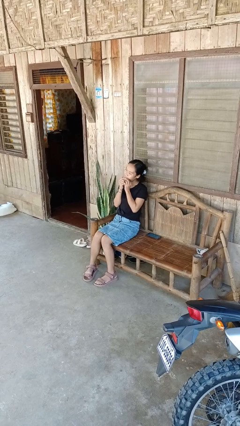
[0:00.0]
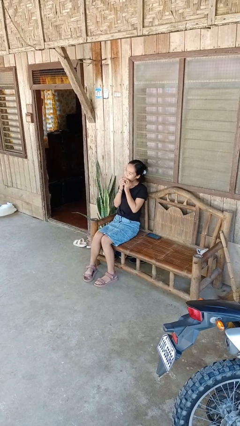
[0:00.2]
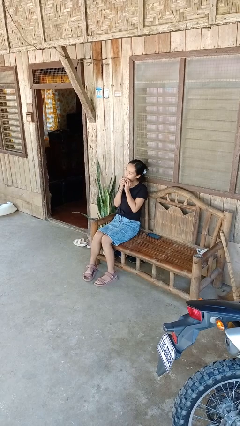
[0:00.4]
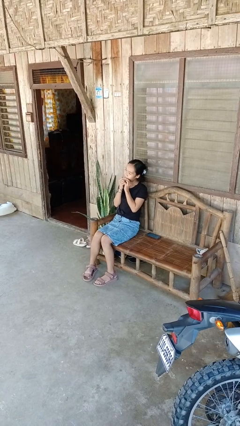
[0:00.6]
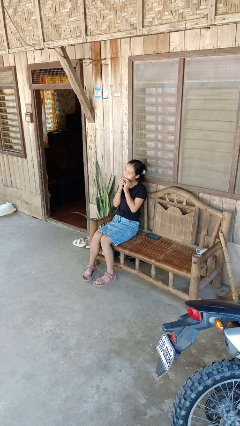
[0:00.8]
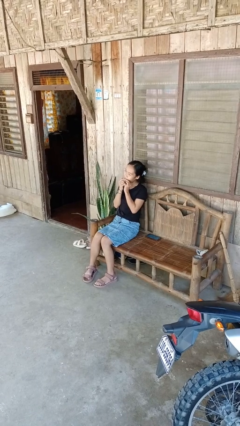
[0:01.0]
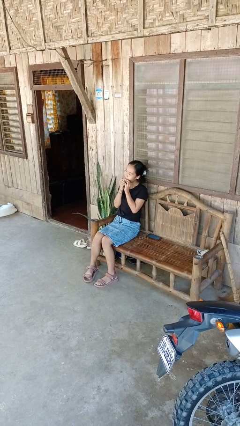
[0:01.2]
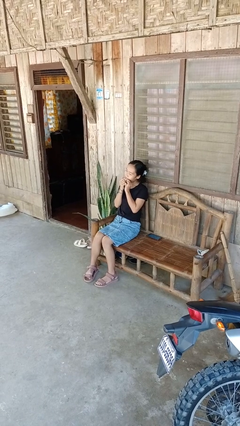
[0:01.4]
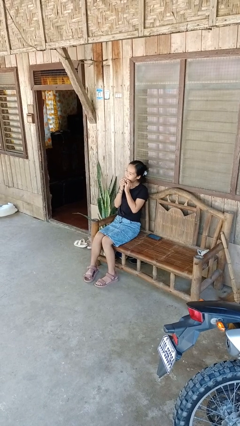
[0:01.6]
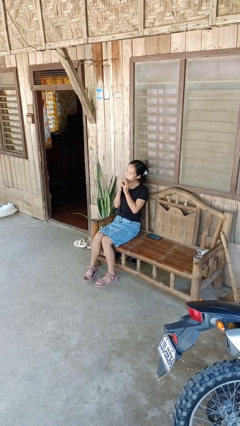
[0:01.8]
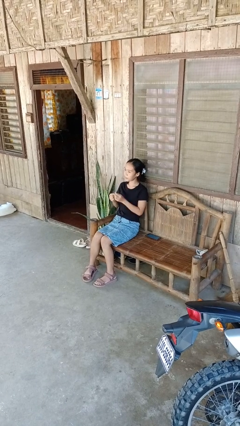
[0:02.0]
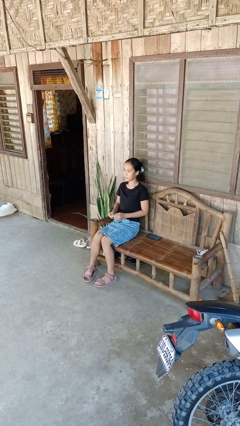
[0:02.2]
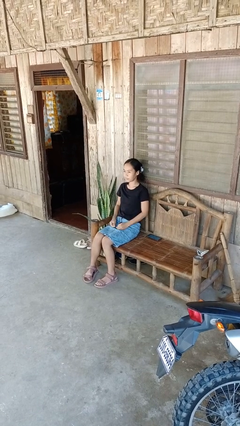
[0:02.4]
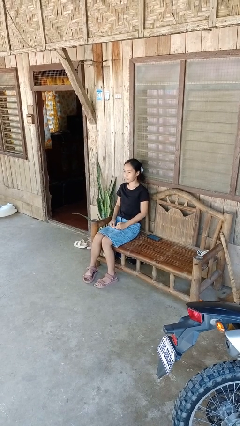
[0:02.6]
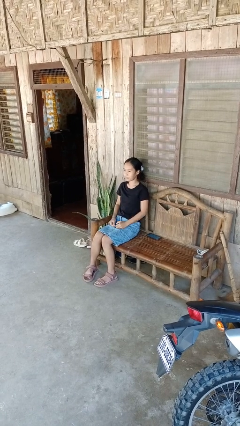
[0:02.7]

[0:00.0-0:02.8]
person flosses

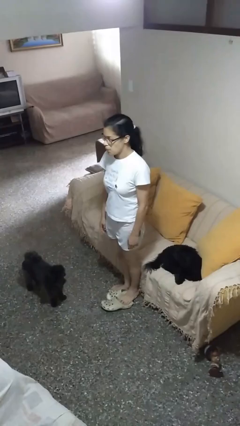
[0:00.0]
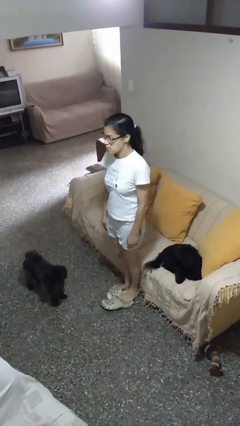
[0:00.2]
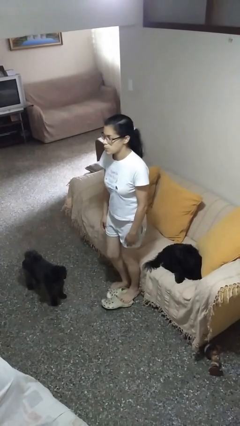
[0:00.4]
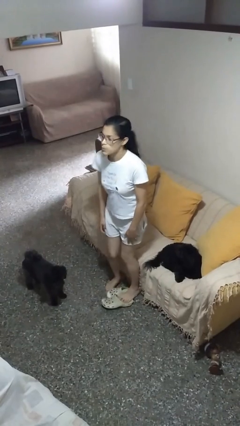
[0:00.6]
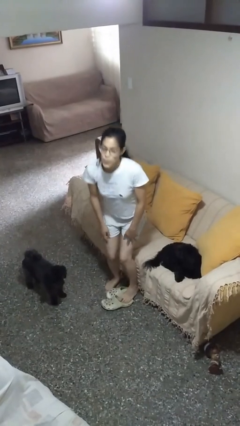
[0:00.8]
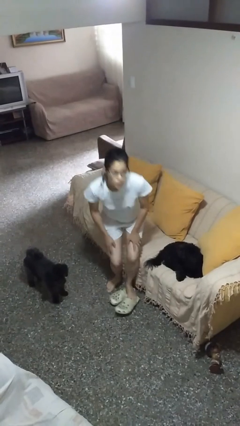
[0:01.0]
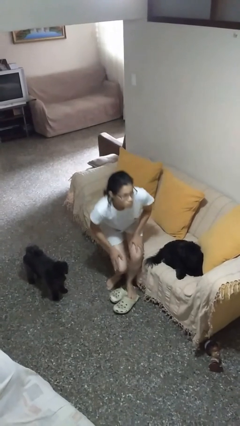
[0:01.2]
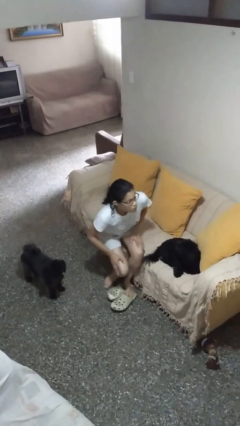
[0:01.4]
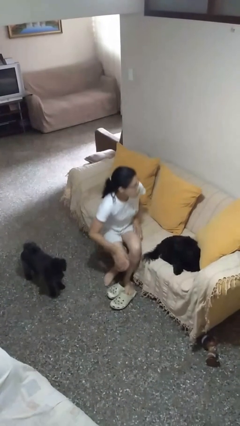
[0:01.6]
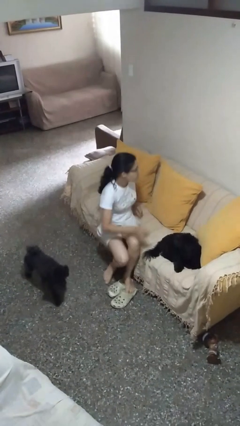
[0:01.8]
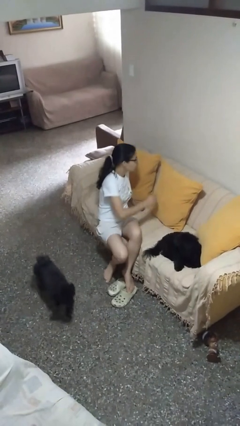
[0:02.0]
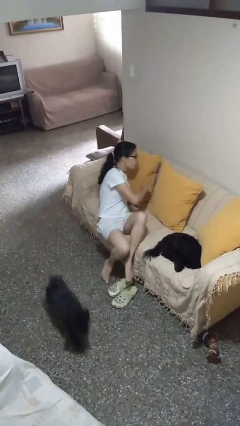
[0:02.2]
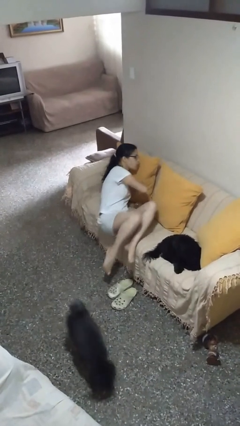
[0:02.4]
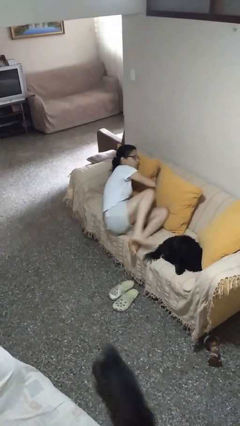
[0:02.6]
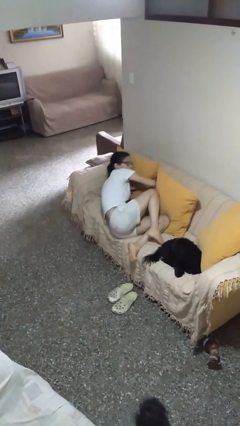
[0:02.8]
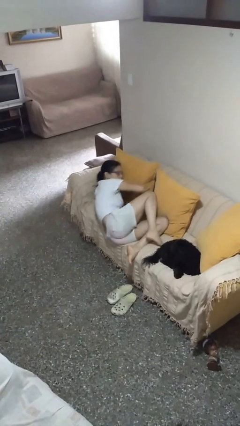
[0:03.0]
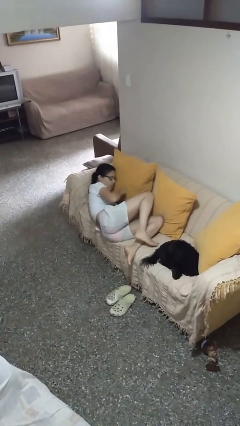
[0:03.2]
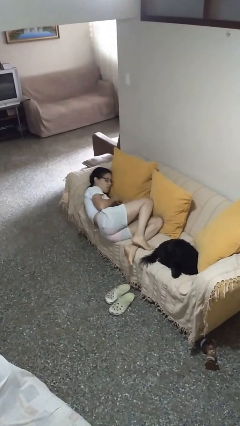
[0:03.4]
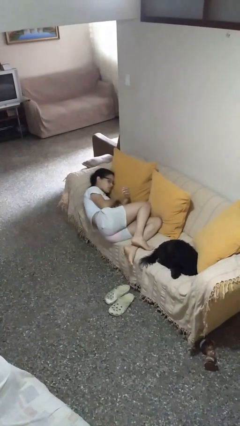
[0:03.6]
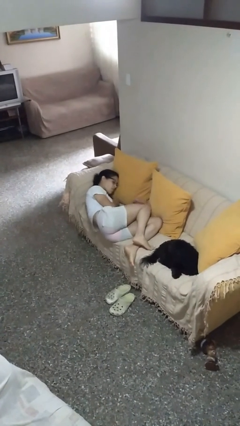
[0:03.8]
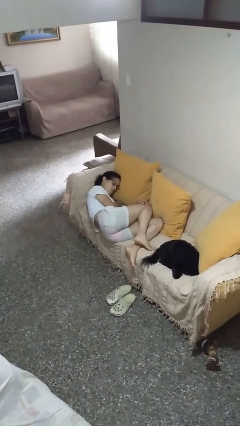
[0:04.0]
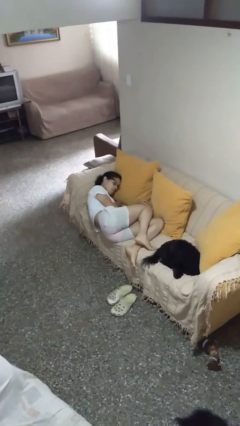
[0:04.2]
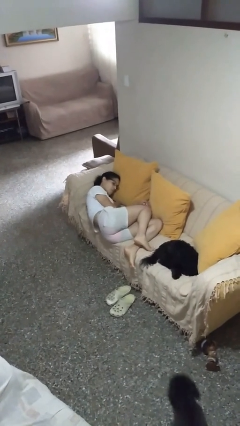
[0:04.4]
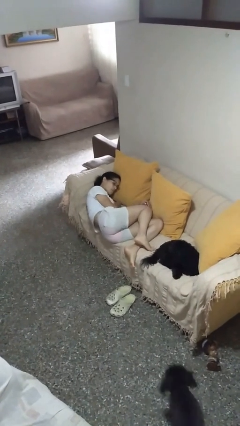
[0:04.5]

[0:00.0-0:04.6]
person lies down on couch

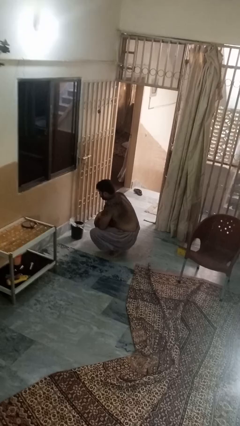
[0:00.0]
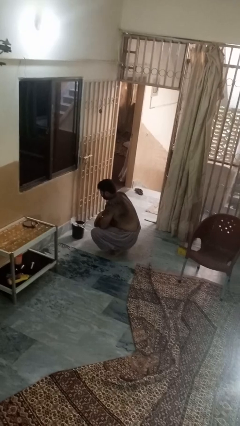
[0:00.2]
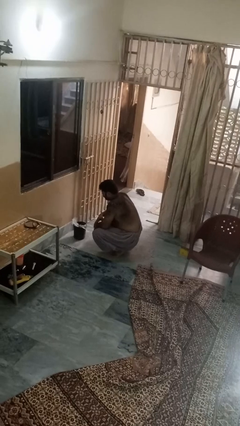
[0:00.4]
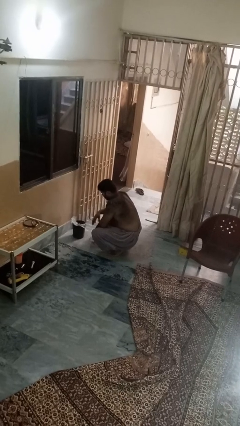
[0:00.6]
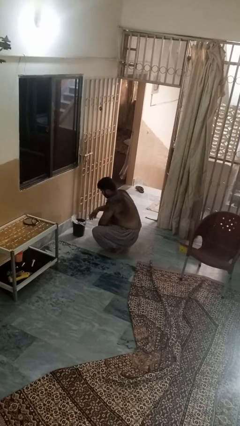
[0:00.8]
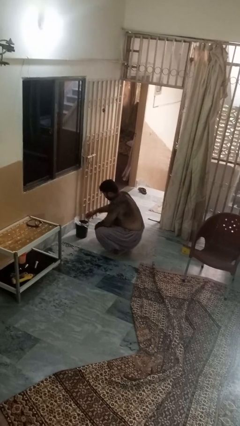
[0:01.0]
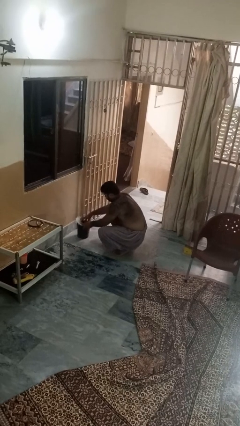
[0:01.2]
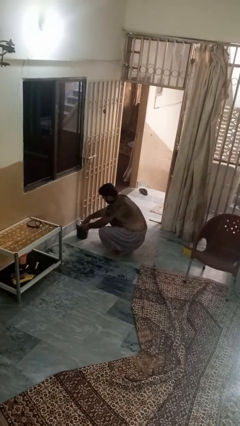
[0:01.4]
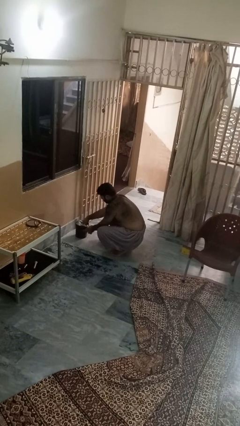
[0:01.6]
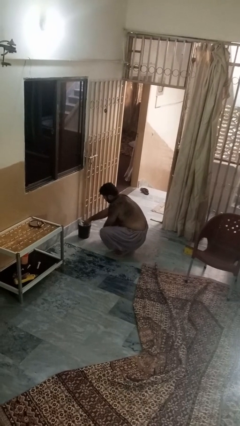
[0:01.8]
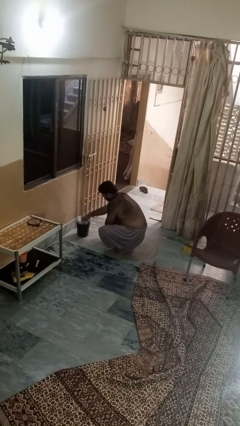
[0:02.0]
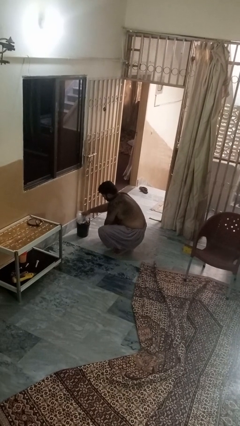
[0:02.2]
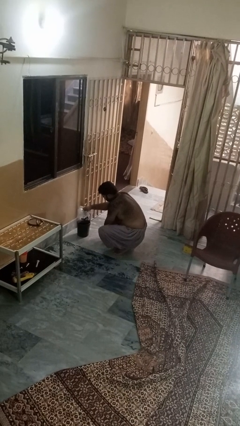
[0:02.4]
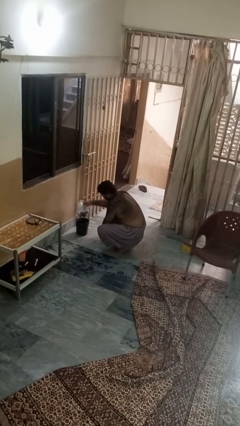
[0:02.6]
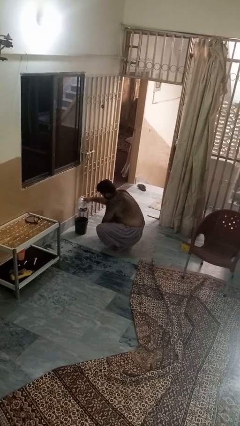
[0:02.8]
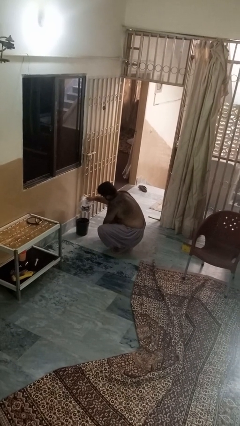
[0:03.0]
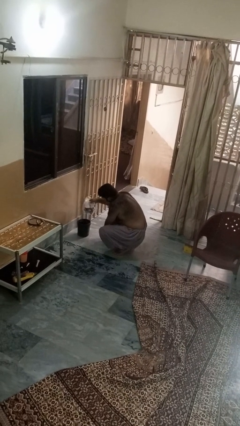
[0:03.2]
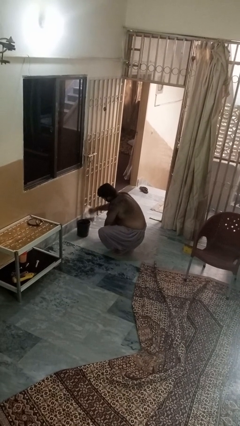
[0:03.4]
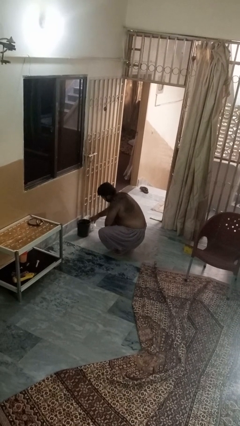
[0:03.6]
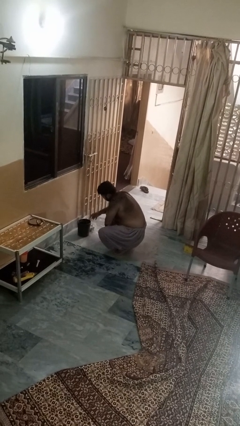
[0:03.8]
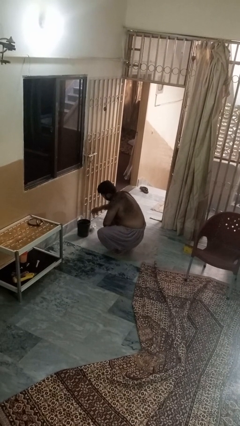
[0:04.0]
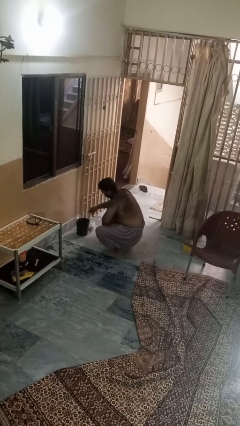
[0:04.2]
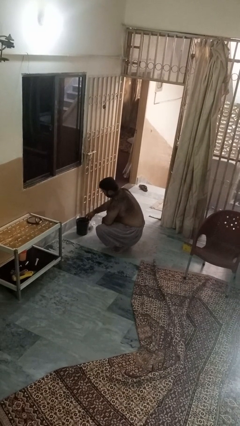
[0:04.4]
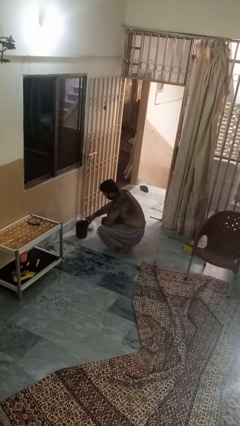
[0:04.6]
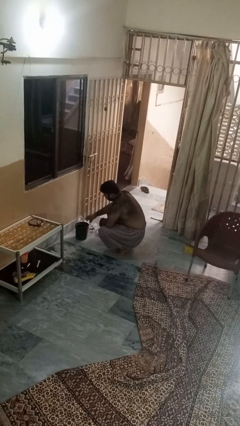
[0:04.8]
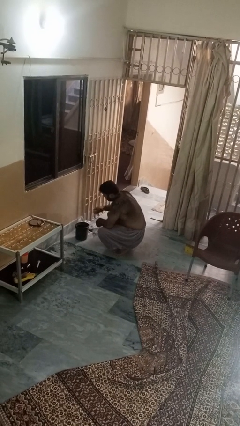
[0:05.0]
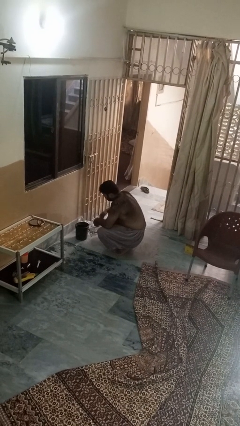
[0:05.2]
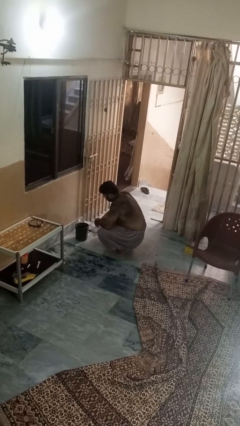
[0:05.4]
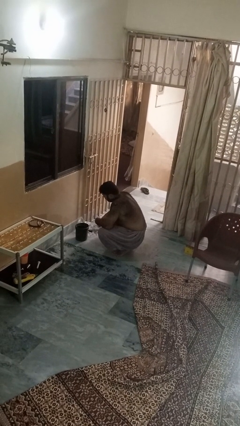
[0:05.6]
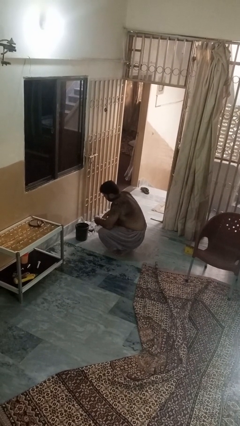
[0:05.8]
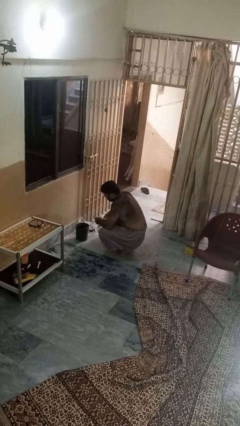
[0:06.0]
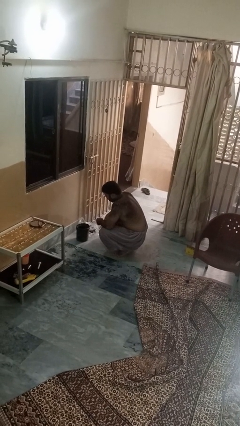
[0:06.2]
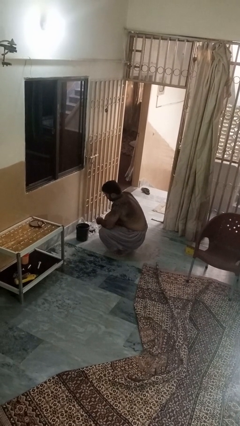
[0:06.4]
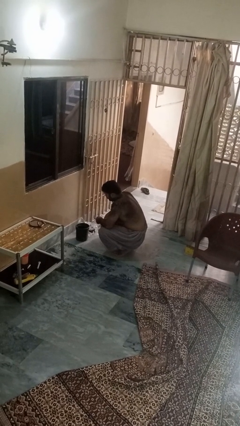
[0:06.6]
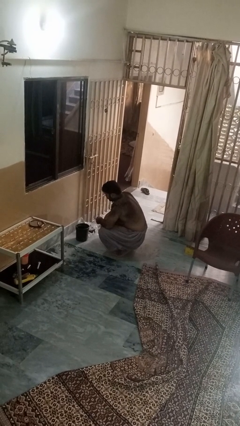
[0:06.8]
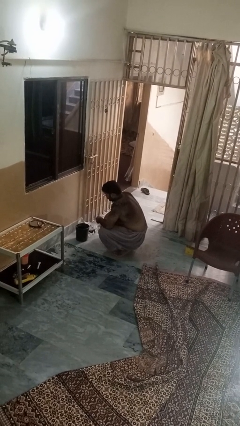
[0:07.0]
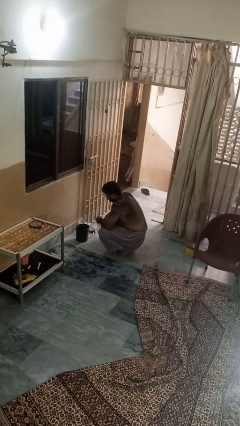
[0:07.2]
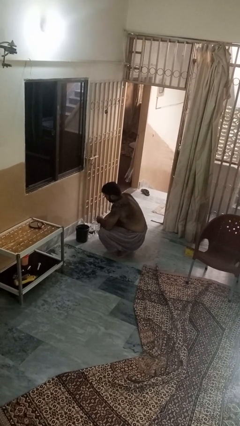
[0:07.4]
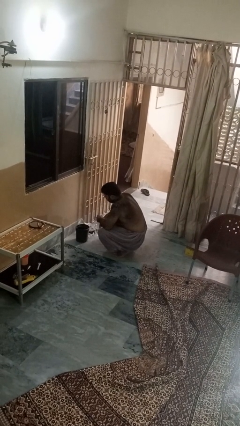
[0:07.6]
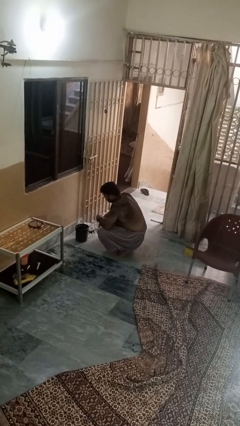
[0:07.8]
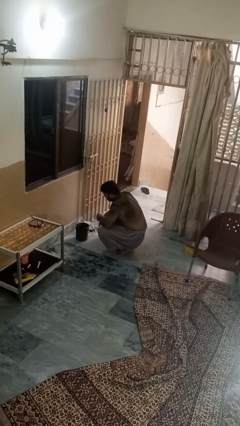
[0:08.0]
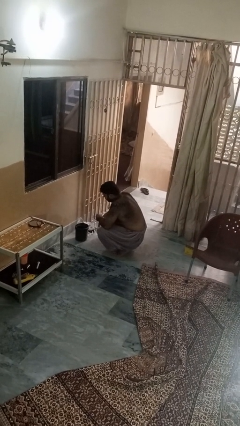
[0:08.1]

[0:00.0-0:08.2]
person removes trashbag from trashcan

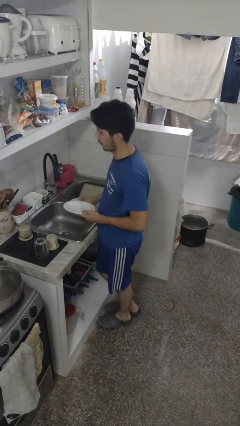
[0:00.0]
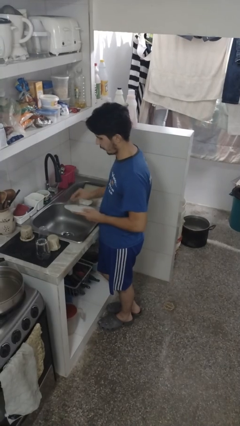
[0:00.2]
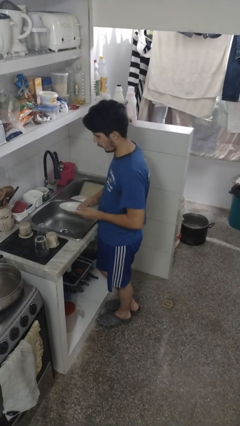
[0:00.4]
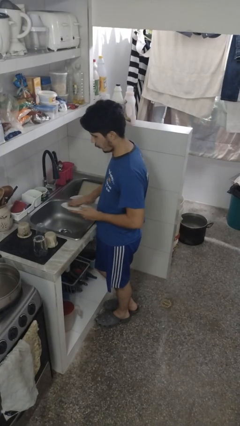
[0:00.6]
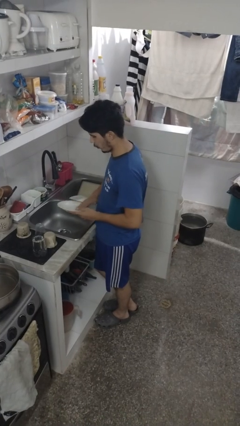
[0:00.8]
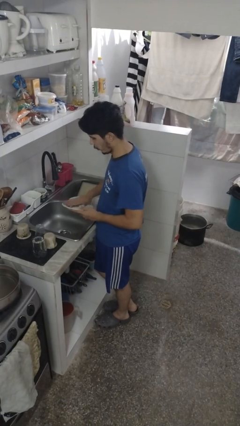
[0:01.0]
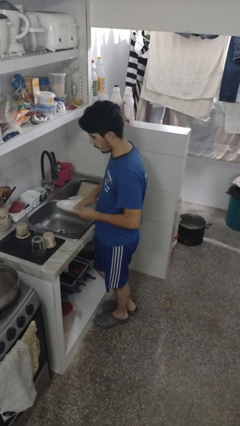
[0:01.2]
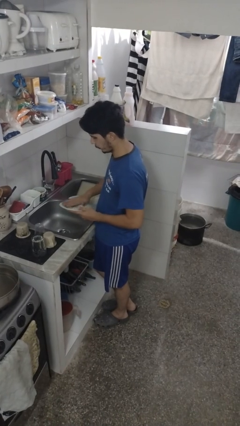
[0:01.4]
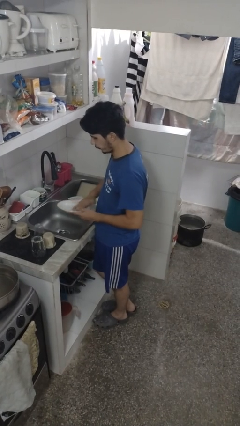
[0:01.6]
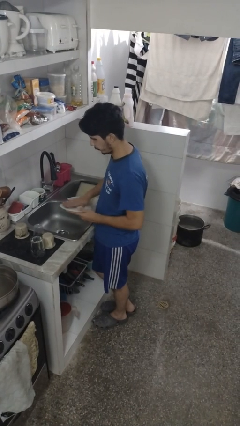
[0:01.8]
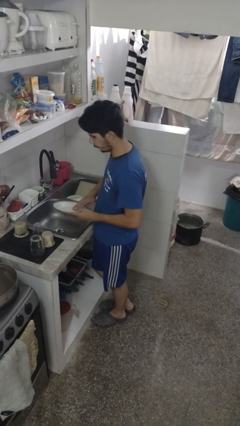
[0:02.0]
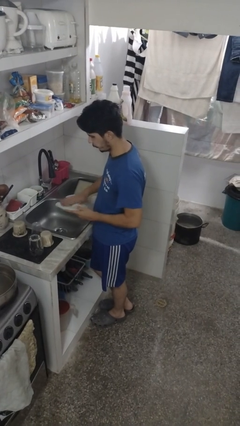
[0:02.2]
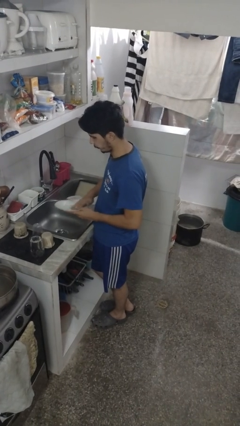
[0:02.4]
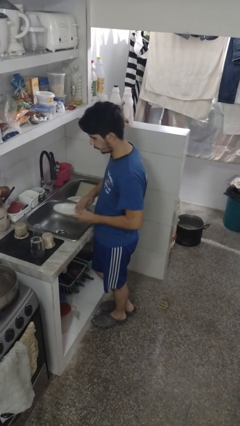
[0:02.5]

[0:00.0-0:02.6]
person washes dish
